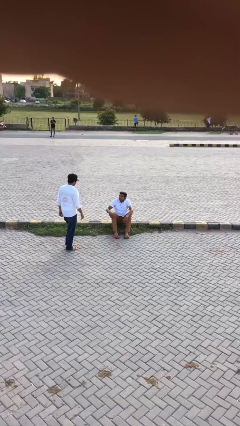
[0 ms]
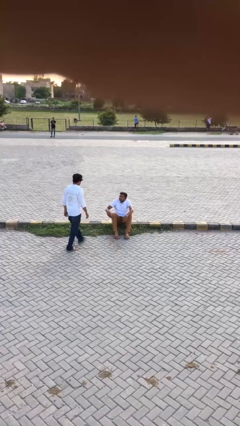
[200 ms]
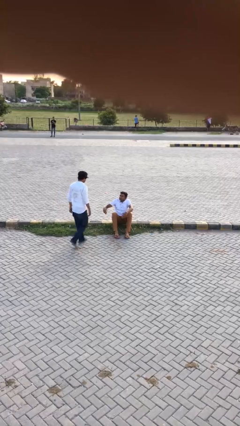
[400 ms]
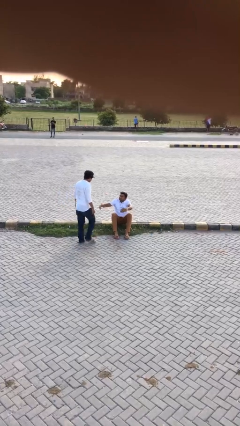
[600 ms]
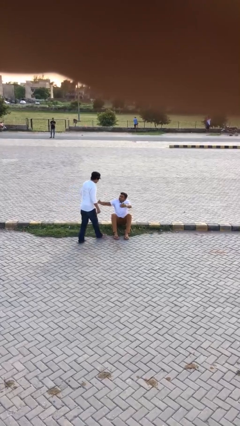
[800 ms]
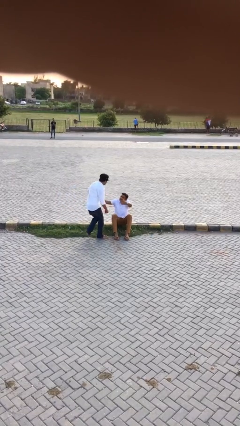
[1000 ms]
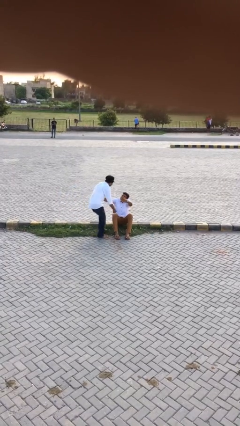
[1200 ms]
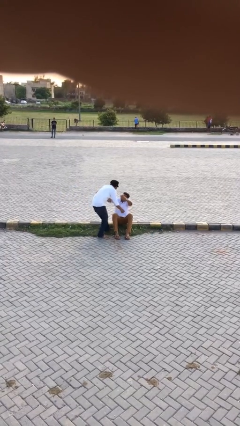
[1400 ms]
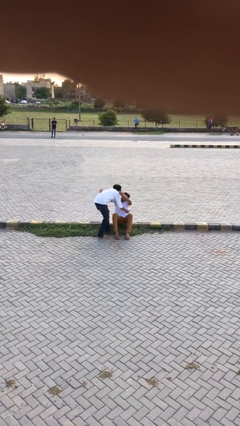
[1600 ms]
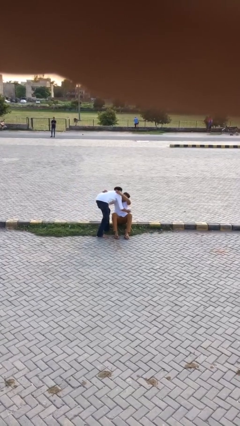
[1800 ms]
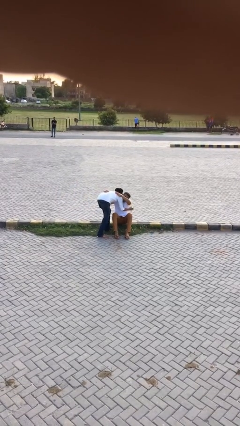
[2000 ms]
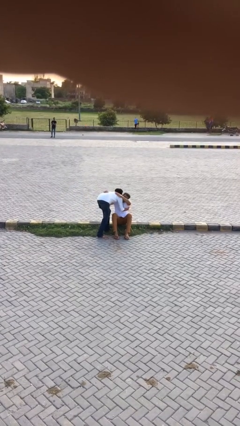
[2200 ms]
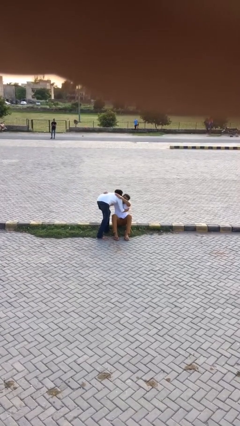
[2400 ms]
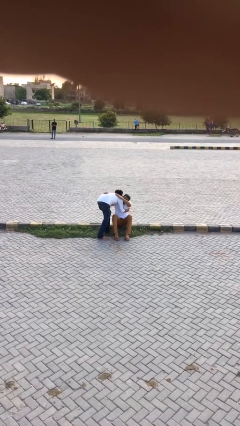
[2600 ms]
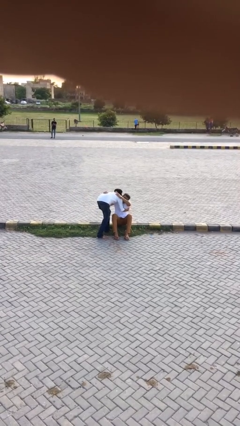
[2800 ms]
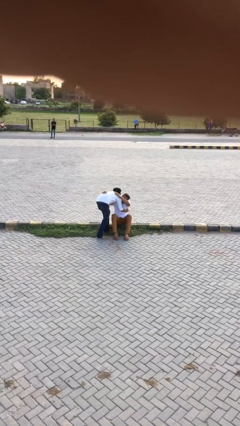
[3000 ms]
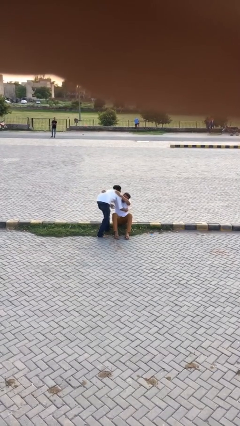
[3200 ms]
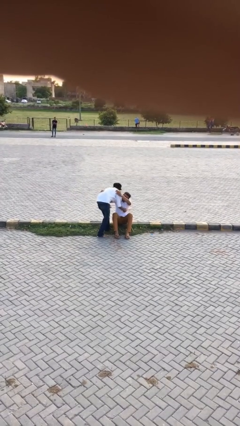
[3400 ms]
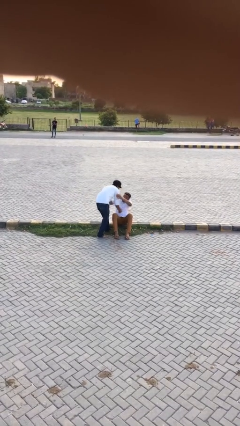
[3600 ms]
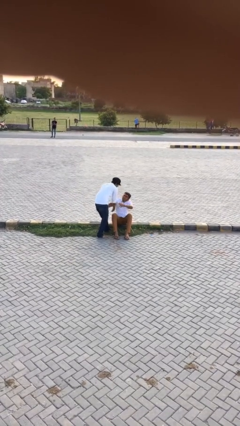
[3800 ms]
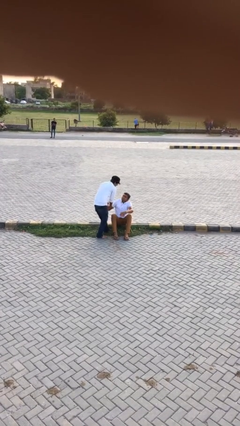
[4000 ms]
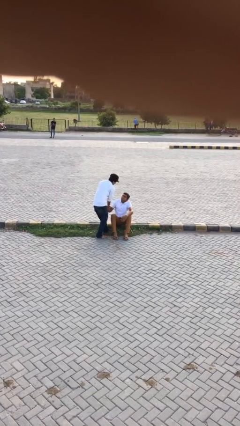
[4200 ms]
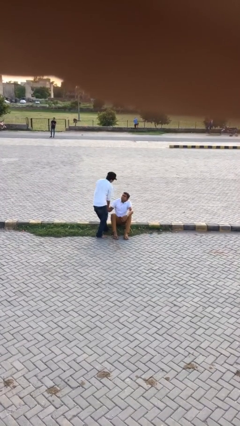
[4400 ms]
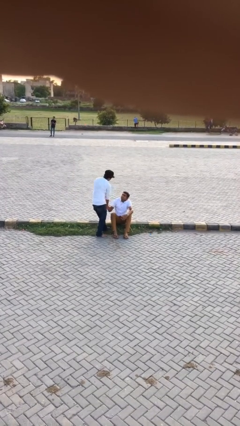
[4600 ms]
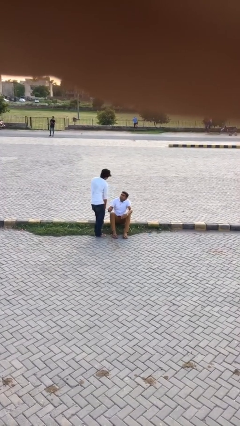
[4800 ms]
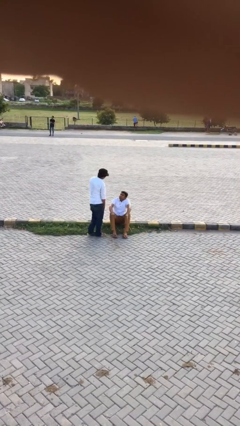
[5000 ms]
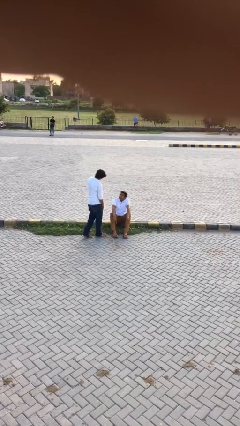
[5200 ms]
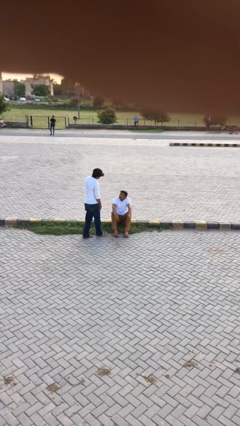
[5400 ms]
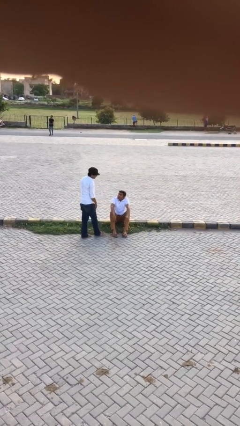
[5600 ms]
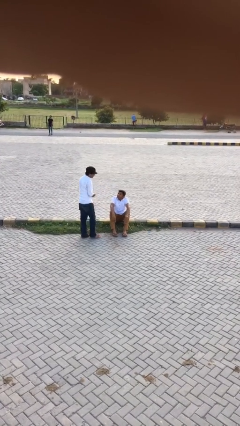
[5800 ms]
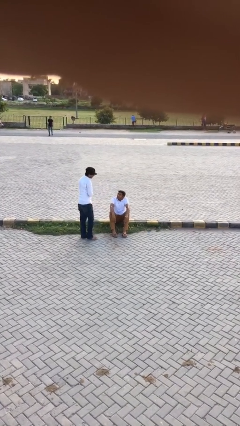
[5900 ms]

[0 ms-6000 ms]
person embraces person

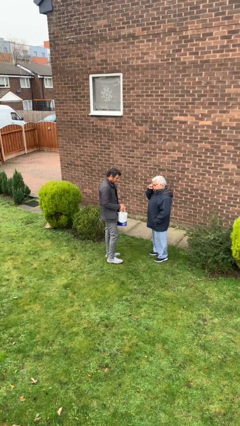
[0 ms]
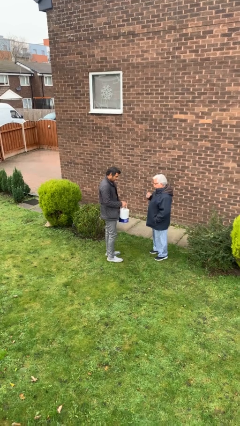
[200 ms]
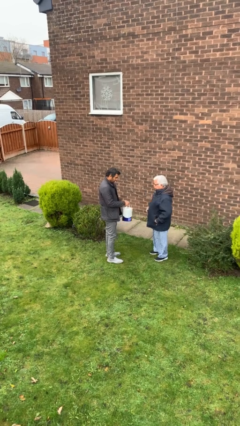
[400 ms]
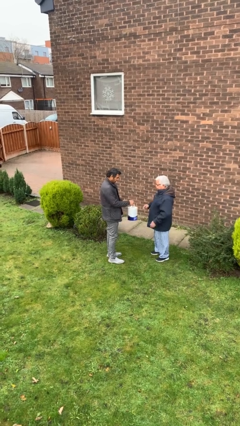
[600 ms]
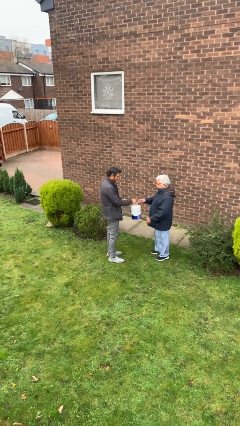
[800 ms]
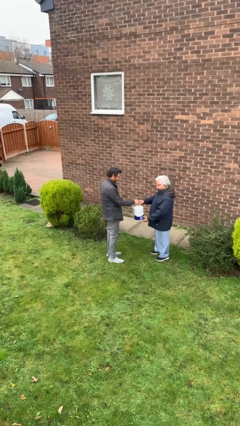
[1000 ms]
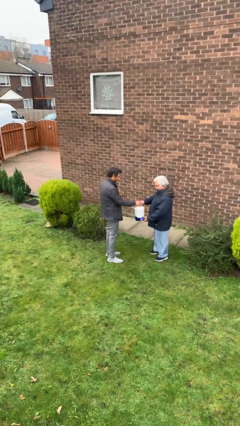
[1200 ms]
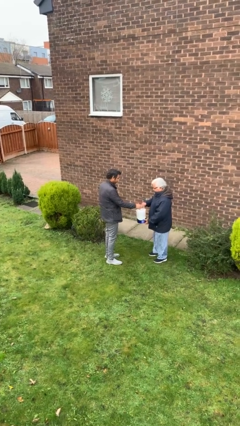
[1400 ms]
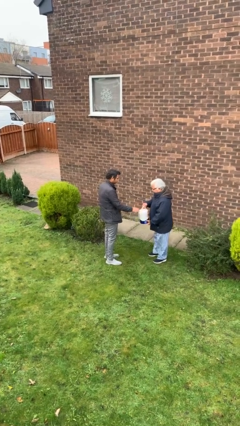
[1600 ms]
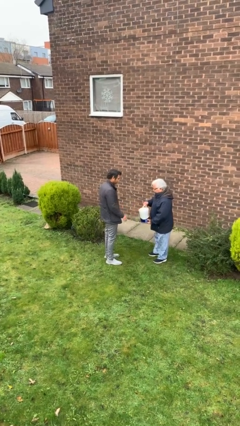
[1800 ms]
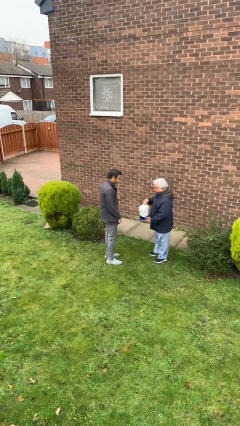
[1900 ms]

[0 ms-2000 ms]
person transfers object to person

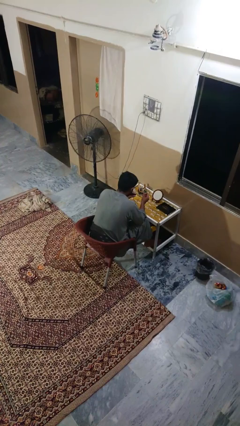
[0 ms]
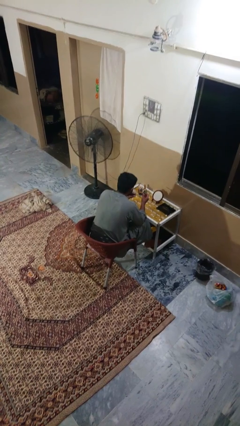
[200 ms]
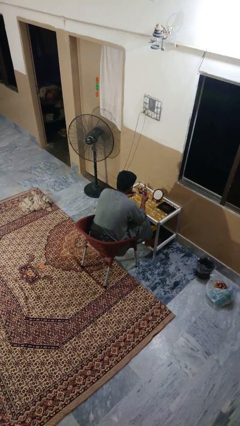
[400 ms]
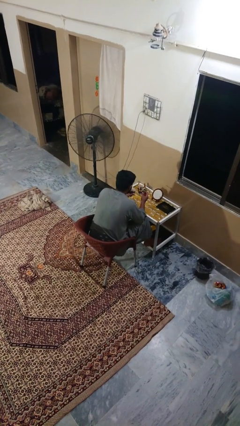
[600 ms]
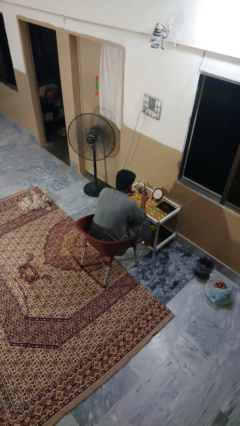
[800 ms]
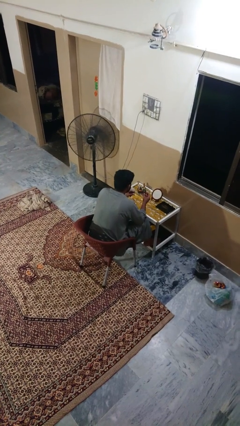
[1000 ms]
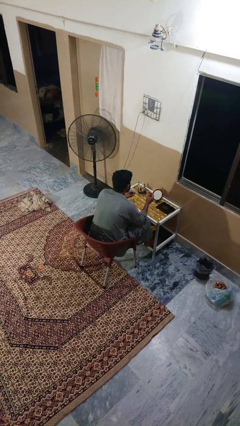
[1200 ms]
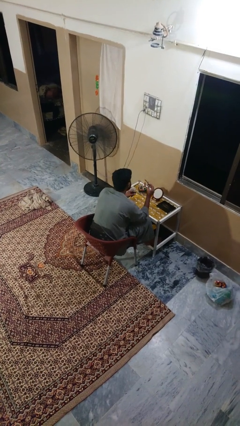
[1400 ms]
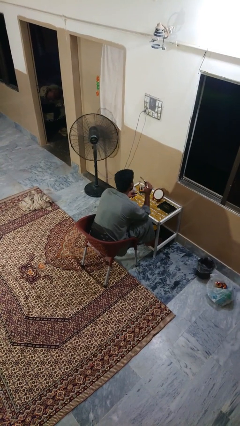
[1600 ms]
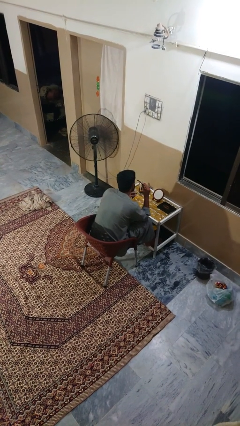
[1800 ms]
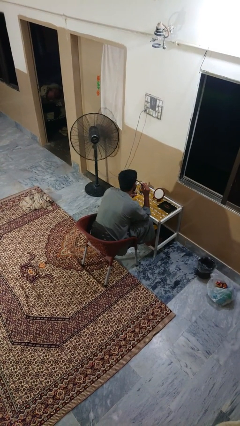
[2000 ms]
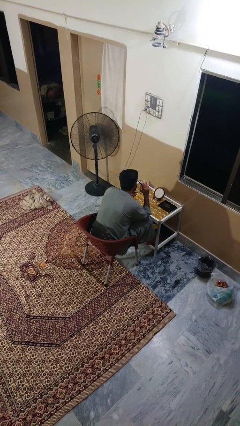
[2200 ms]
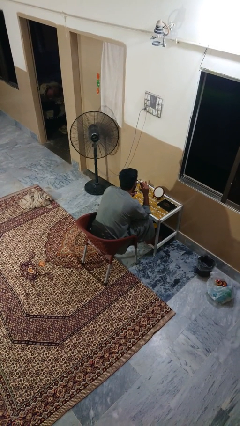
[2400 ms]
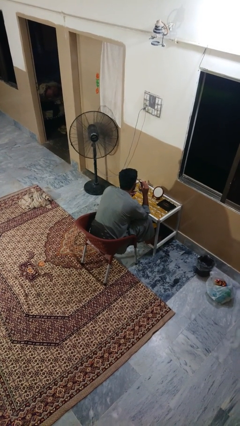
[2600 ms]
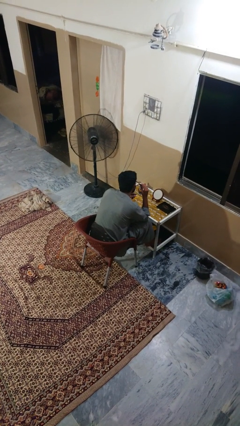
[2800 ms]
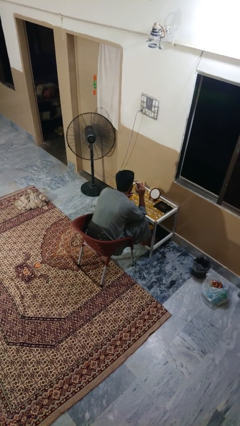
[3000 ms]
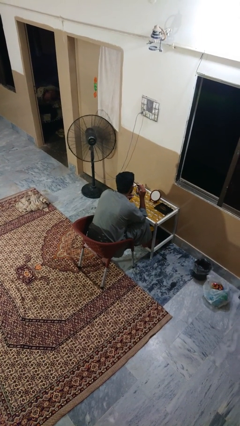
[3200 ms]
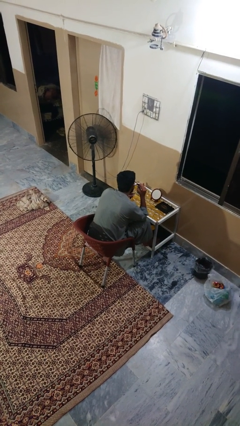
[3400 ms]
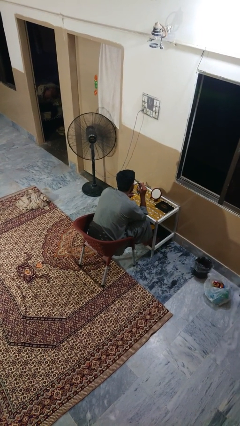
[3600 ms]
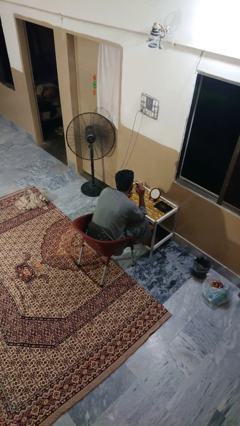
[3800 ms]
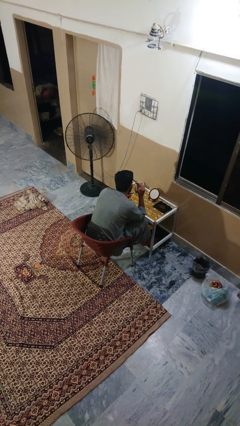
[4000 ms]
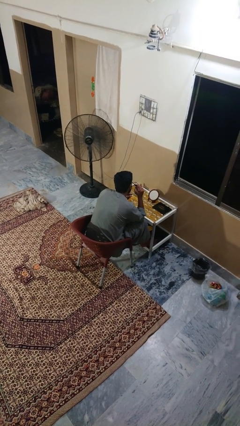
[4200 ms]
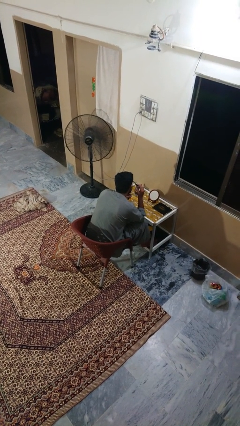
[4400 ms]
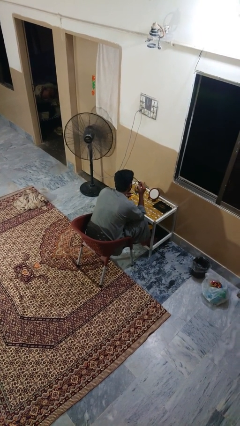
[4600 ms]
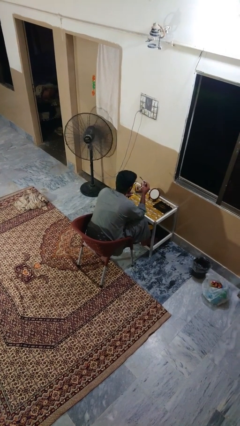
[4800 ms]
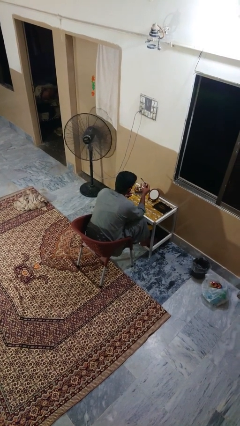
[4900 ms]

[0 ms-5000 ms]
person applies eye makeup

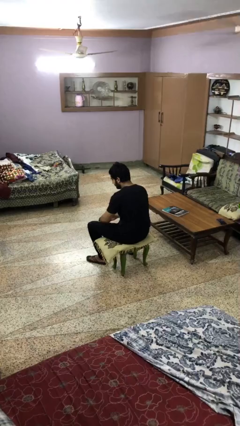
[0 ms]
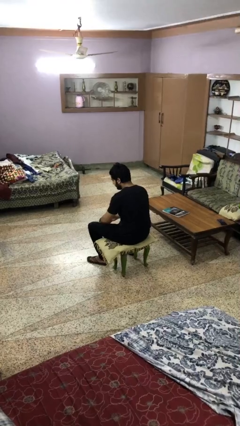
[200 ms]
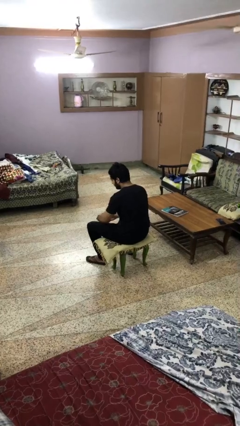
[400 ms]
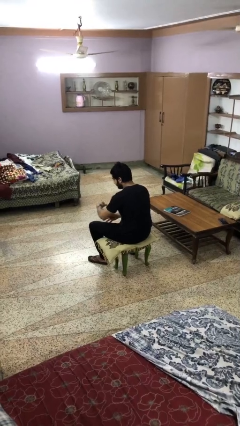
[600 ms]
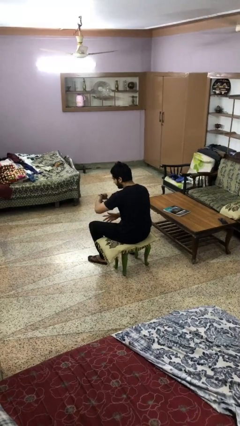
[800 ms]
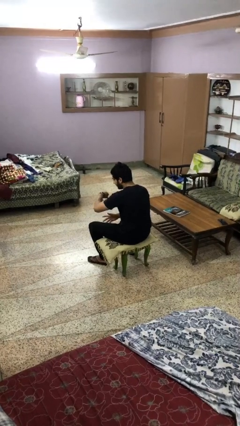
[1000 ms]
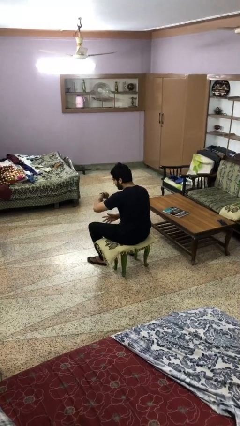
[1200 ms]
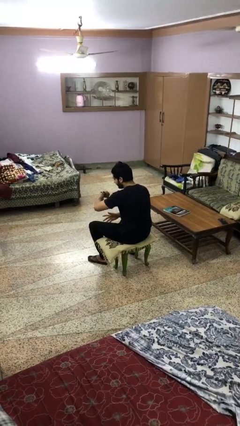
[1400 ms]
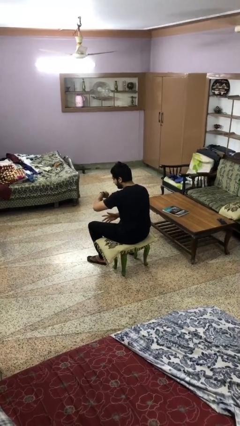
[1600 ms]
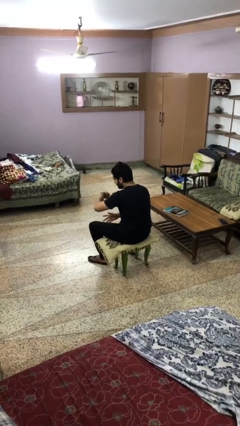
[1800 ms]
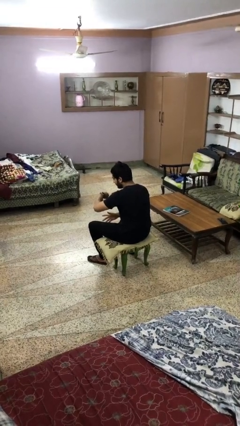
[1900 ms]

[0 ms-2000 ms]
person looks at wristwatch

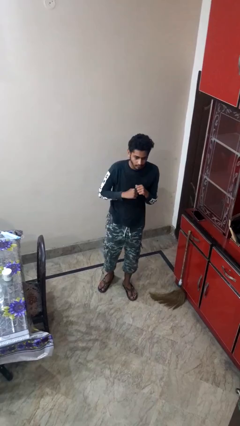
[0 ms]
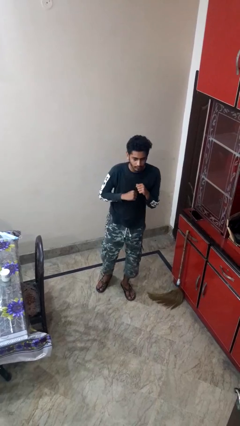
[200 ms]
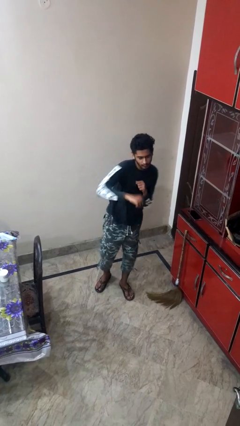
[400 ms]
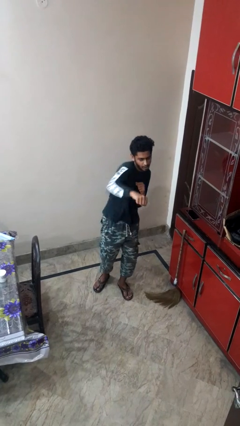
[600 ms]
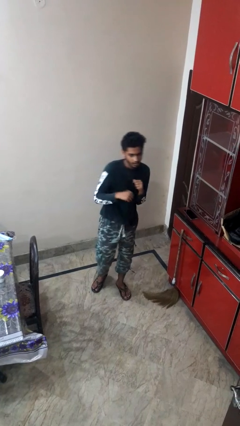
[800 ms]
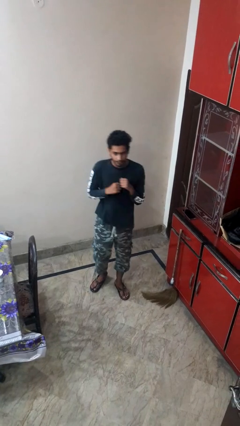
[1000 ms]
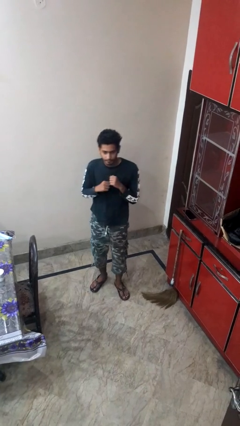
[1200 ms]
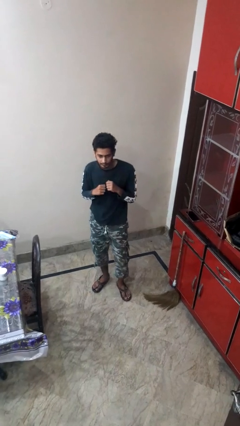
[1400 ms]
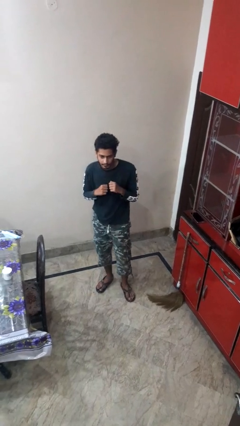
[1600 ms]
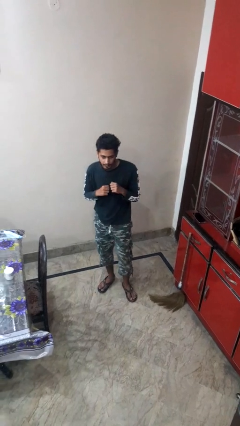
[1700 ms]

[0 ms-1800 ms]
person punches

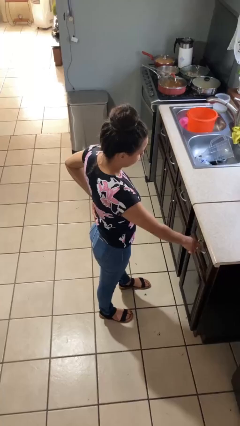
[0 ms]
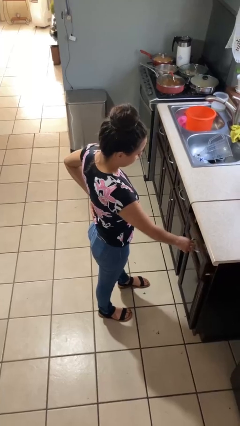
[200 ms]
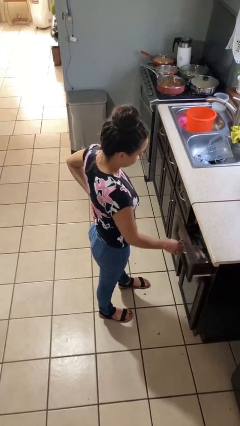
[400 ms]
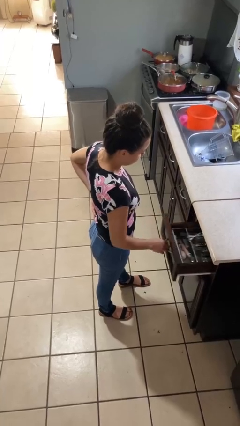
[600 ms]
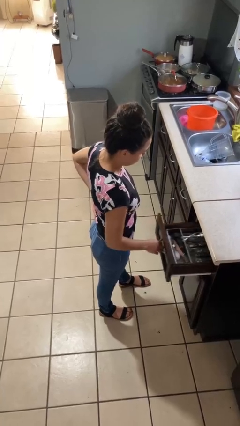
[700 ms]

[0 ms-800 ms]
person opens kitchen drawer
